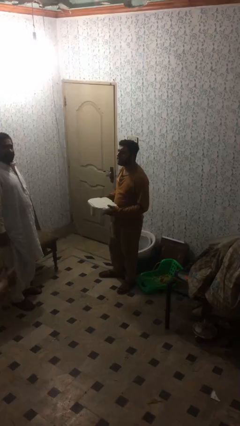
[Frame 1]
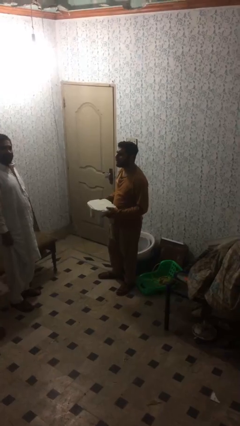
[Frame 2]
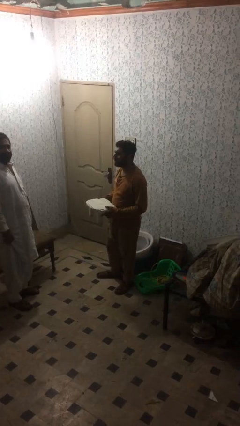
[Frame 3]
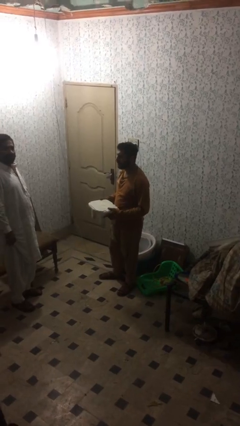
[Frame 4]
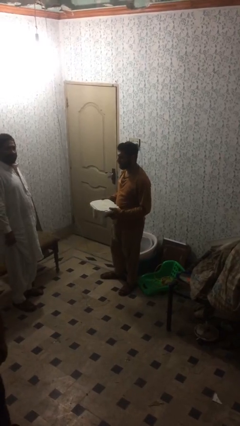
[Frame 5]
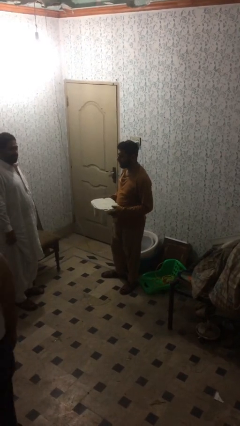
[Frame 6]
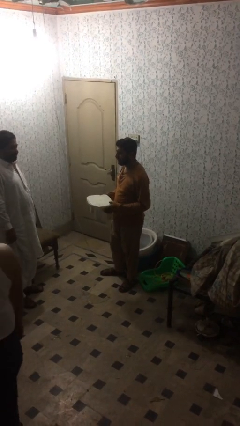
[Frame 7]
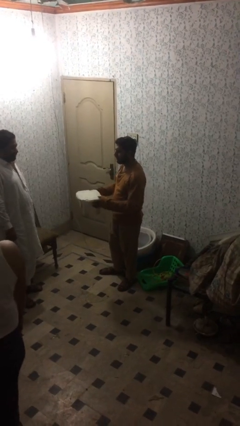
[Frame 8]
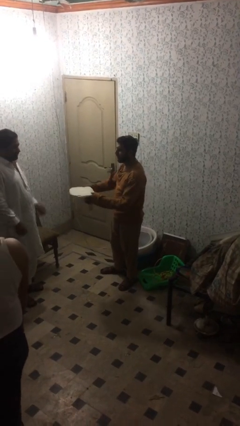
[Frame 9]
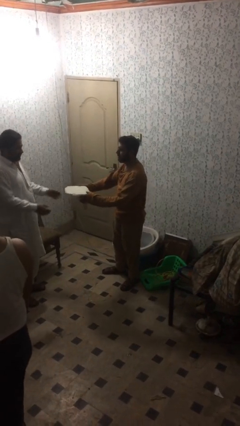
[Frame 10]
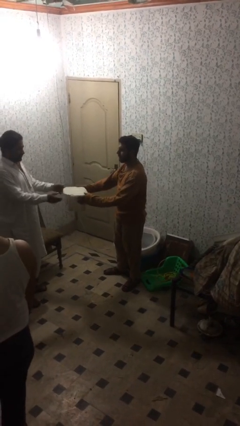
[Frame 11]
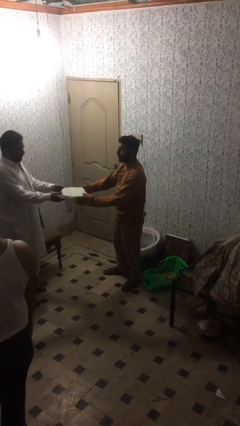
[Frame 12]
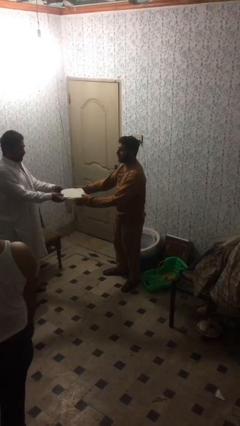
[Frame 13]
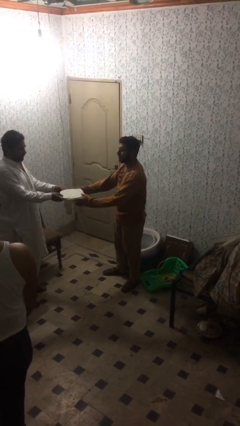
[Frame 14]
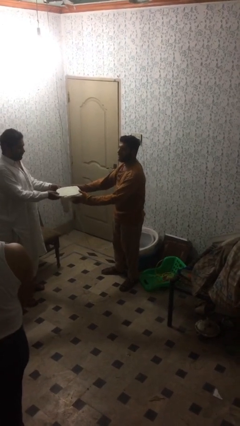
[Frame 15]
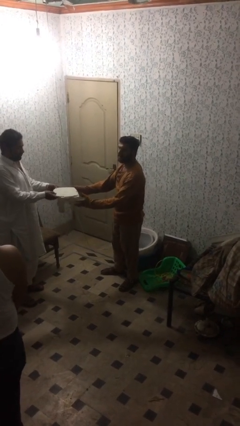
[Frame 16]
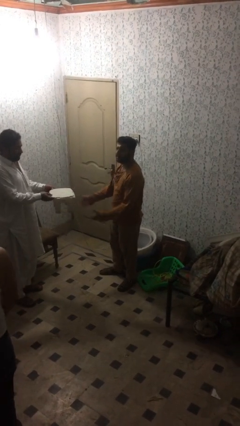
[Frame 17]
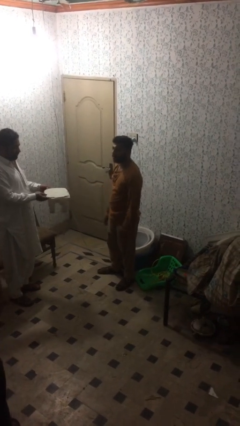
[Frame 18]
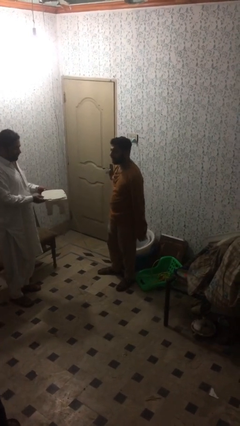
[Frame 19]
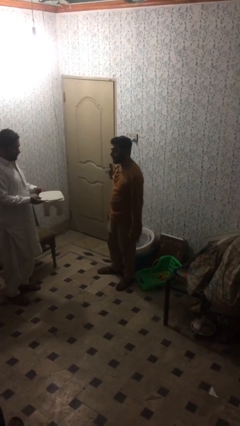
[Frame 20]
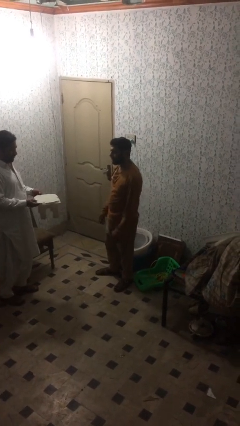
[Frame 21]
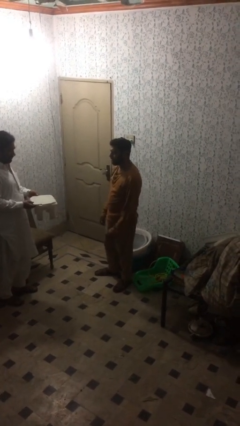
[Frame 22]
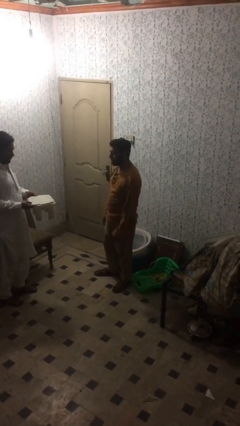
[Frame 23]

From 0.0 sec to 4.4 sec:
person transfers object to person

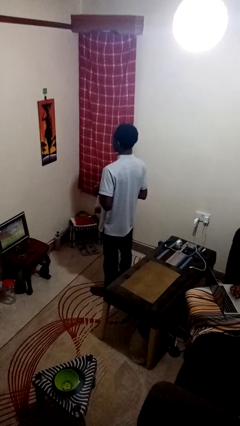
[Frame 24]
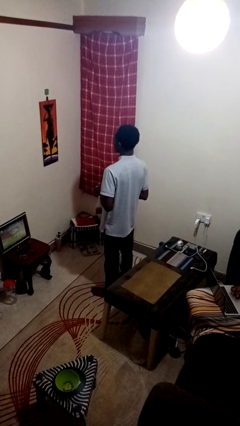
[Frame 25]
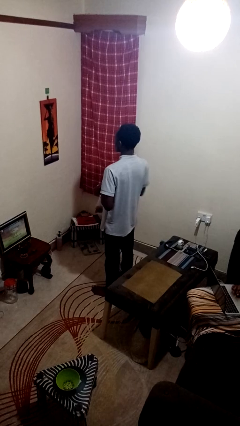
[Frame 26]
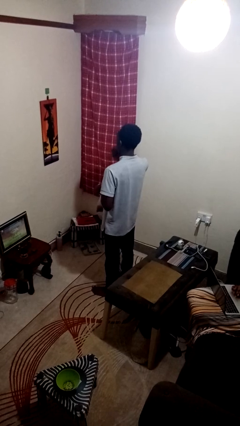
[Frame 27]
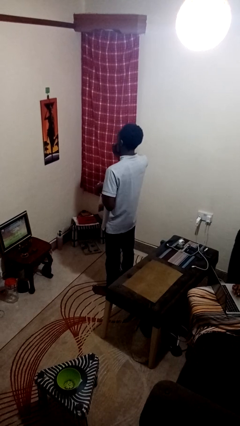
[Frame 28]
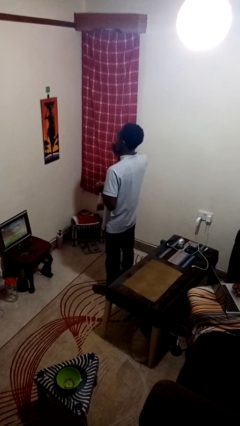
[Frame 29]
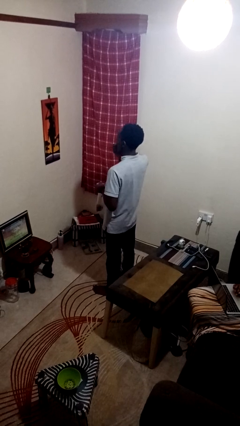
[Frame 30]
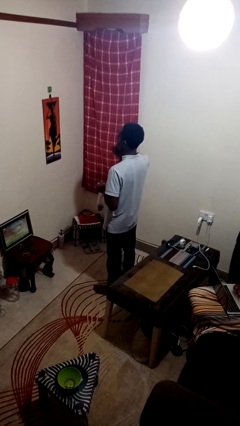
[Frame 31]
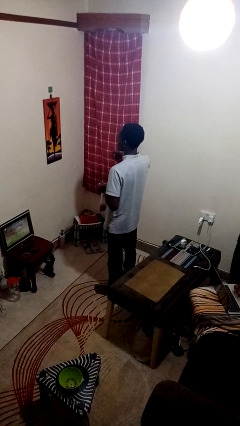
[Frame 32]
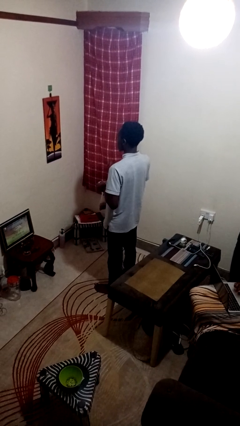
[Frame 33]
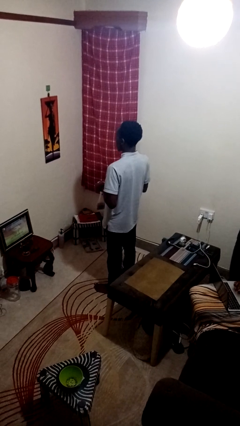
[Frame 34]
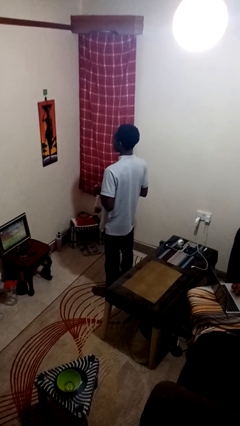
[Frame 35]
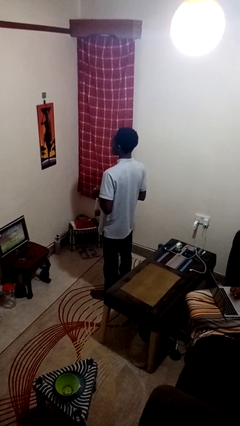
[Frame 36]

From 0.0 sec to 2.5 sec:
person eats snack from bag

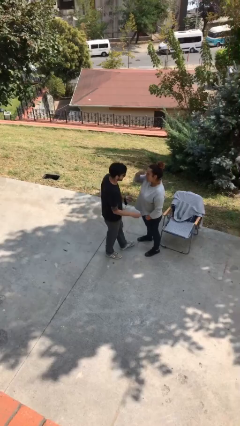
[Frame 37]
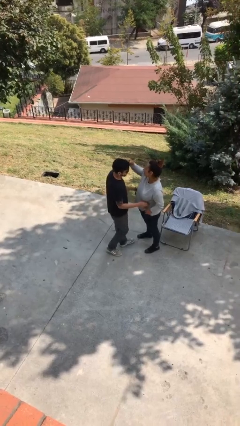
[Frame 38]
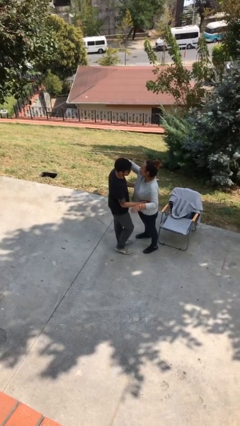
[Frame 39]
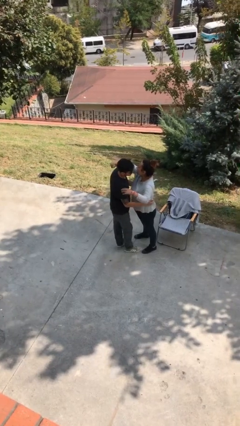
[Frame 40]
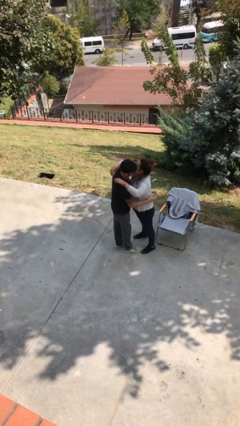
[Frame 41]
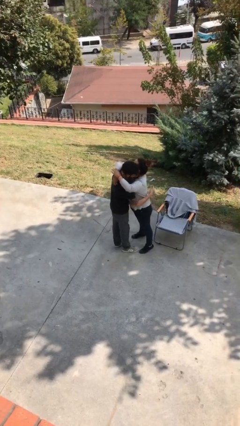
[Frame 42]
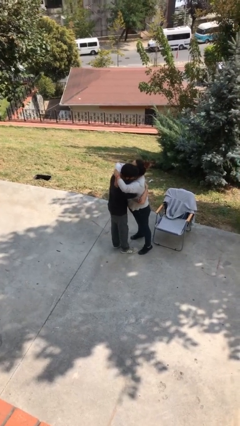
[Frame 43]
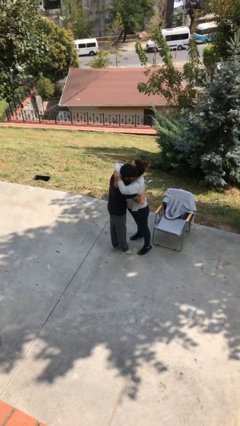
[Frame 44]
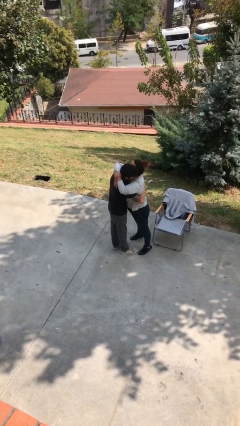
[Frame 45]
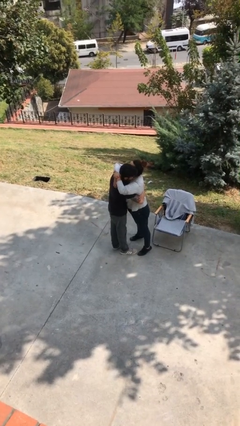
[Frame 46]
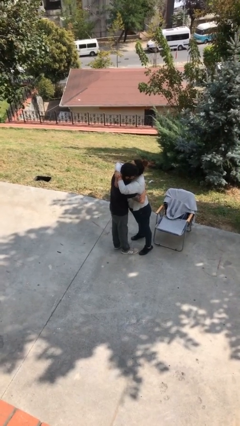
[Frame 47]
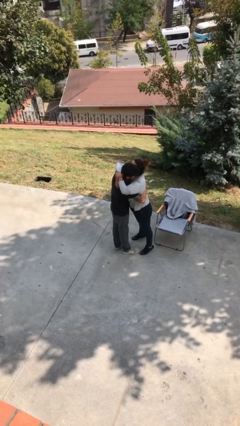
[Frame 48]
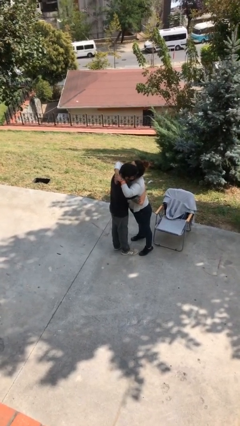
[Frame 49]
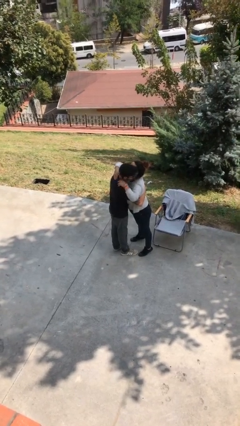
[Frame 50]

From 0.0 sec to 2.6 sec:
person embraces person

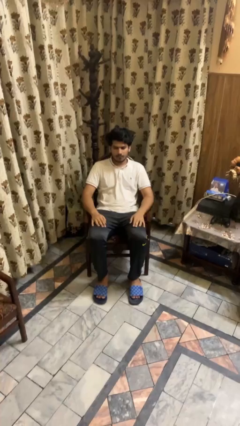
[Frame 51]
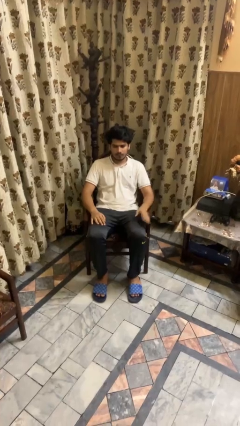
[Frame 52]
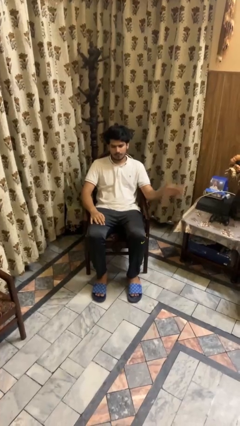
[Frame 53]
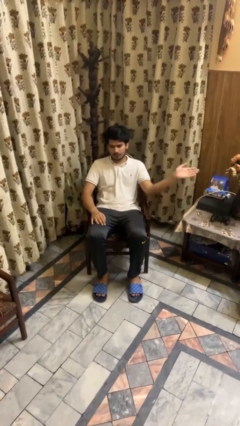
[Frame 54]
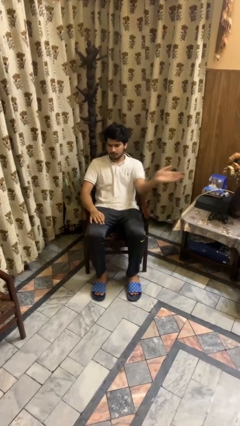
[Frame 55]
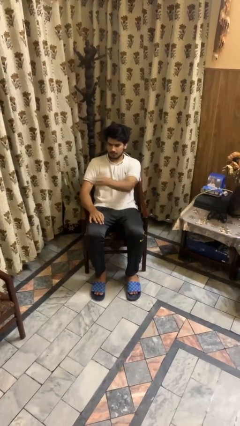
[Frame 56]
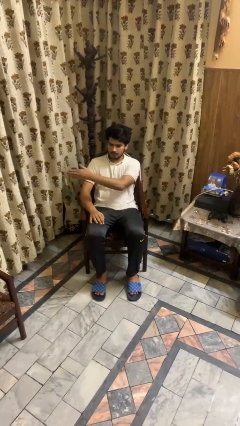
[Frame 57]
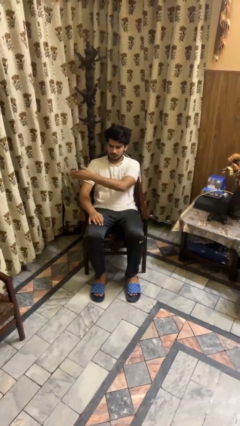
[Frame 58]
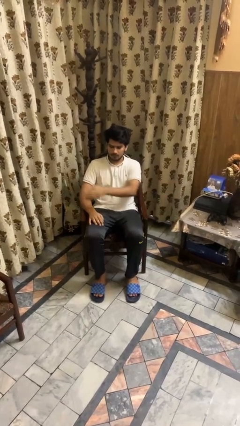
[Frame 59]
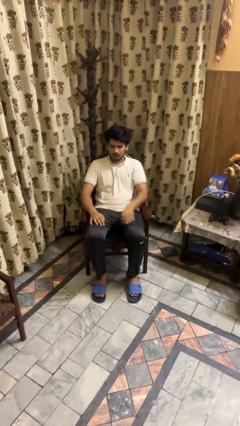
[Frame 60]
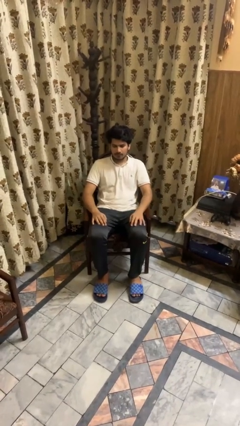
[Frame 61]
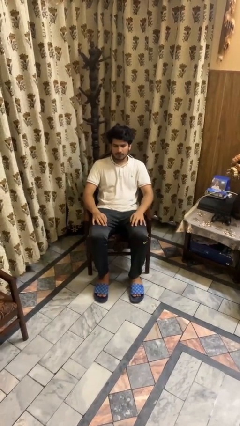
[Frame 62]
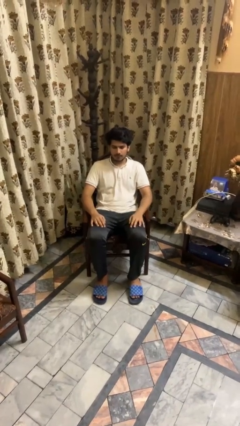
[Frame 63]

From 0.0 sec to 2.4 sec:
person gestures swipe right

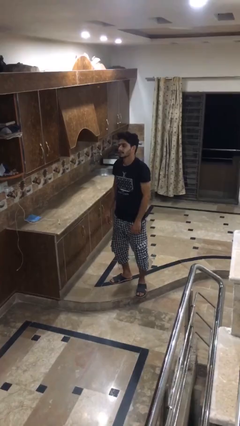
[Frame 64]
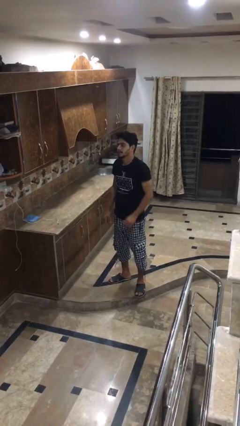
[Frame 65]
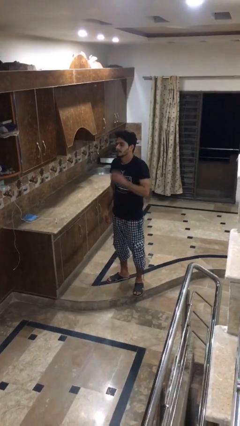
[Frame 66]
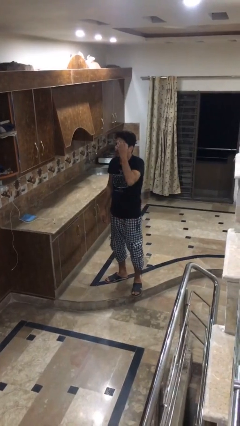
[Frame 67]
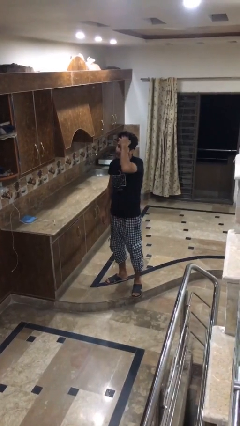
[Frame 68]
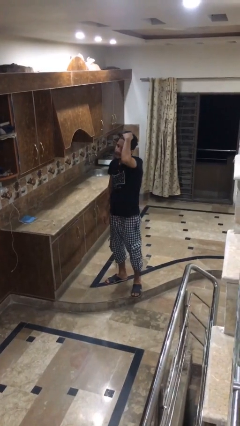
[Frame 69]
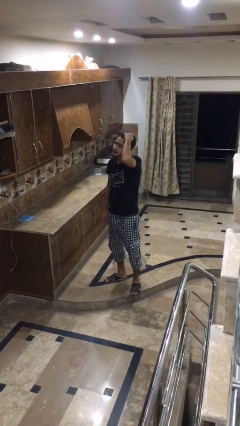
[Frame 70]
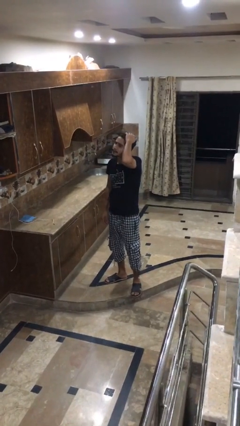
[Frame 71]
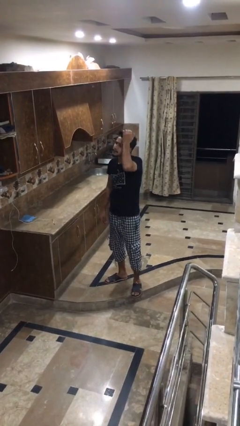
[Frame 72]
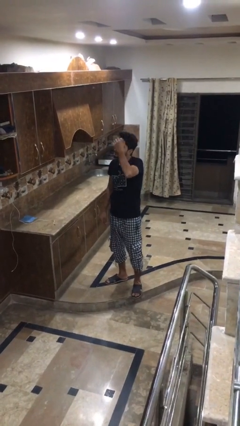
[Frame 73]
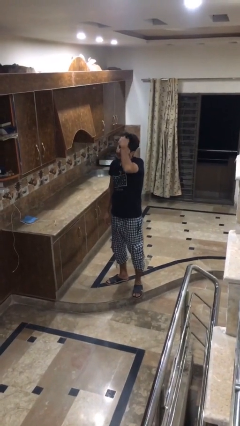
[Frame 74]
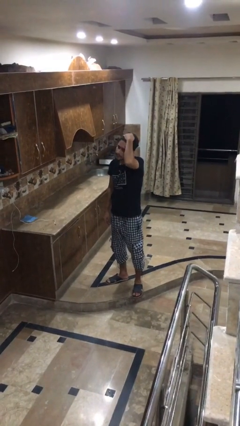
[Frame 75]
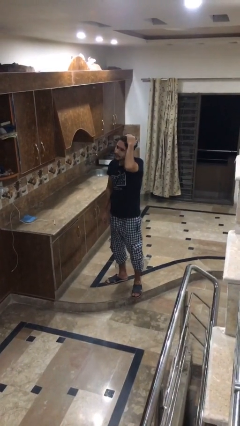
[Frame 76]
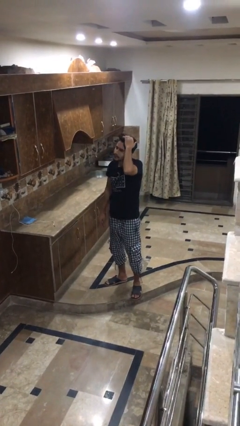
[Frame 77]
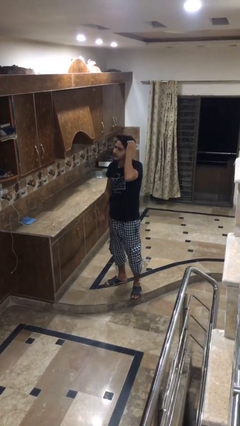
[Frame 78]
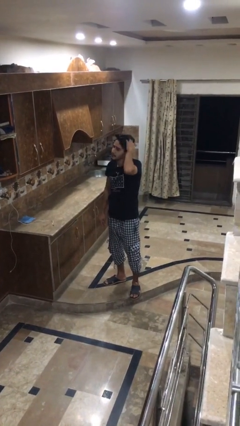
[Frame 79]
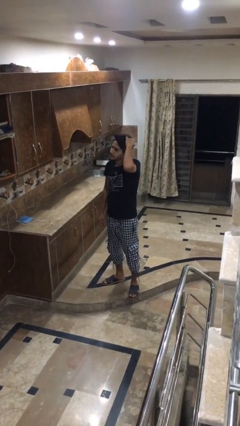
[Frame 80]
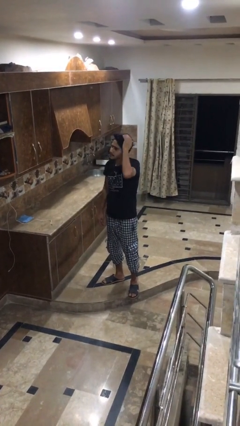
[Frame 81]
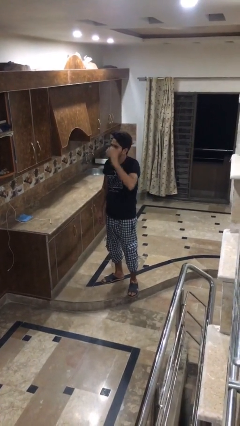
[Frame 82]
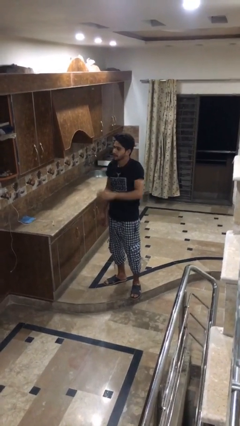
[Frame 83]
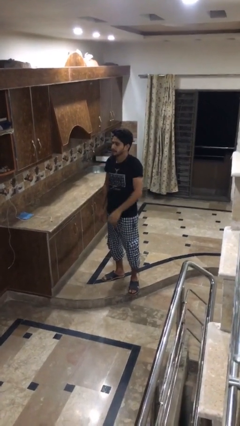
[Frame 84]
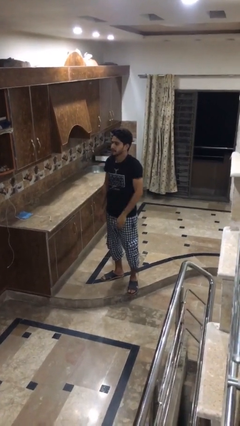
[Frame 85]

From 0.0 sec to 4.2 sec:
person strokes hair

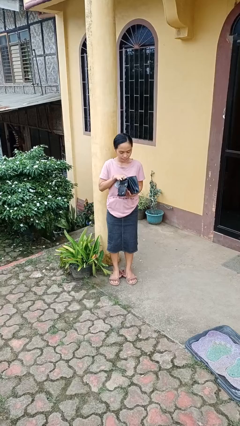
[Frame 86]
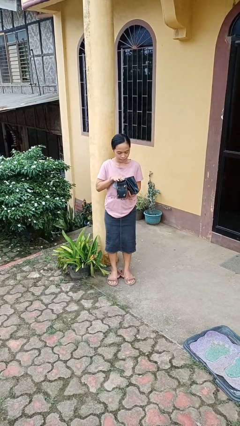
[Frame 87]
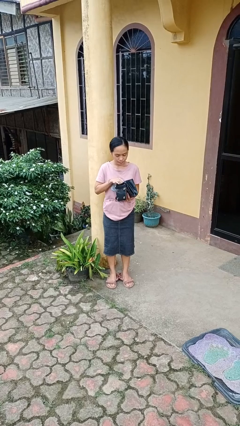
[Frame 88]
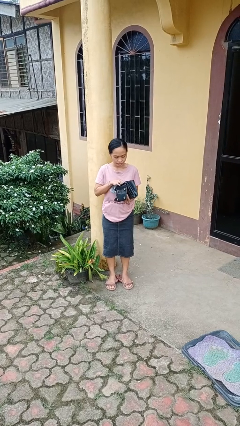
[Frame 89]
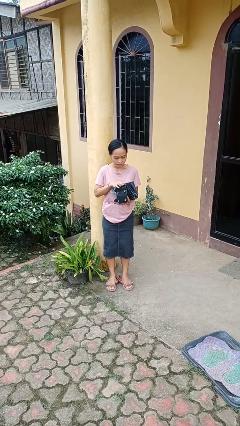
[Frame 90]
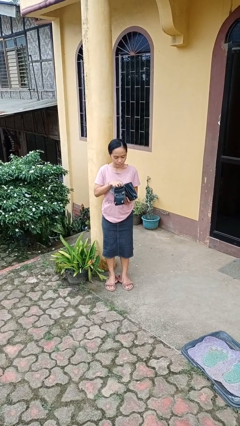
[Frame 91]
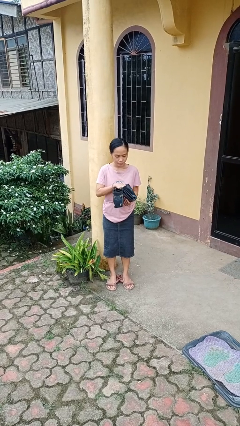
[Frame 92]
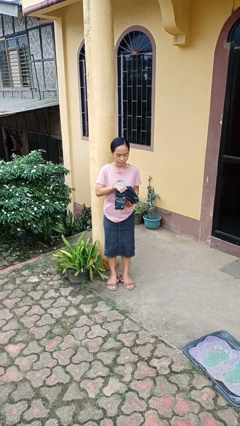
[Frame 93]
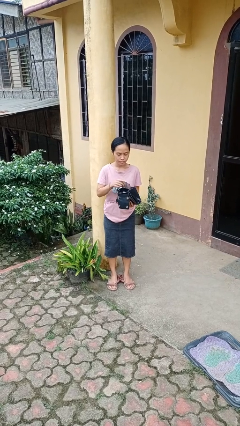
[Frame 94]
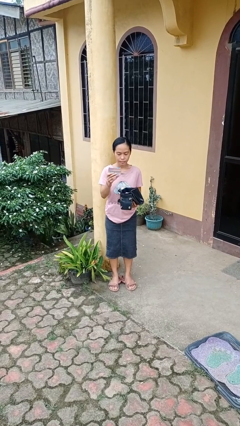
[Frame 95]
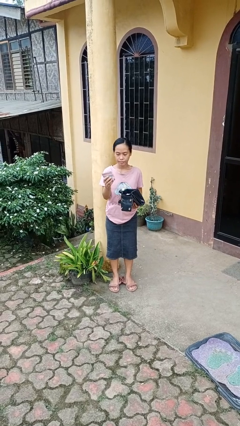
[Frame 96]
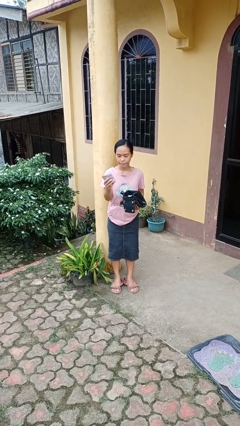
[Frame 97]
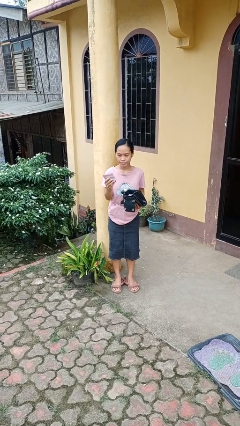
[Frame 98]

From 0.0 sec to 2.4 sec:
person searches in purse
